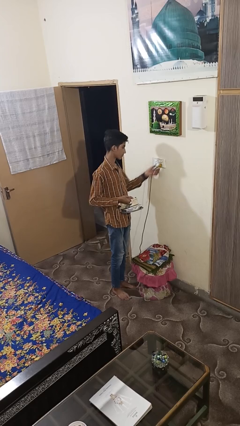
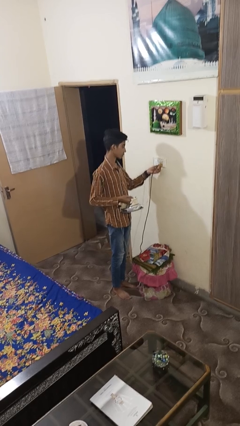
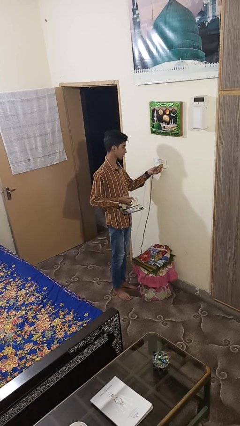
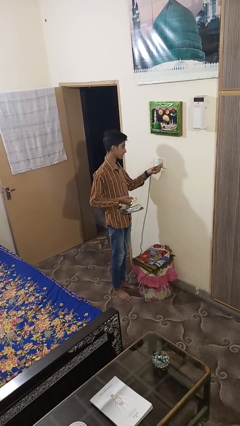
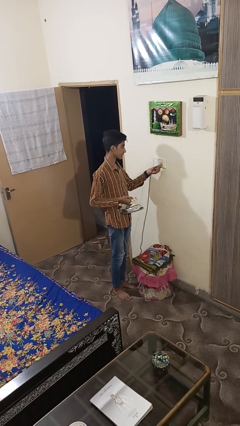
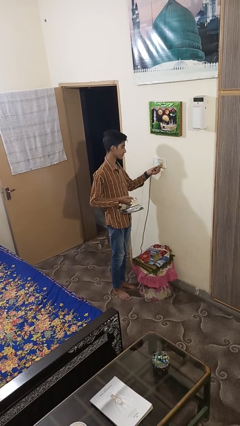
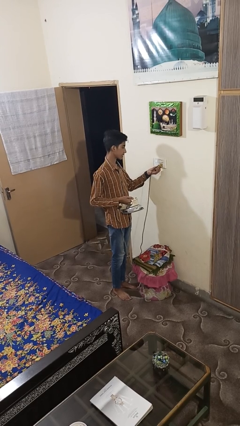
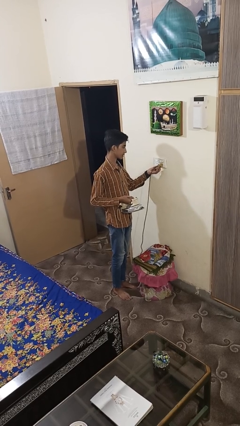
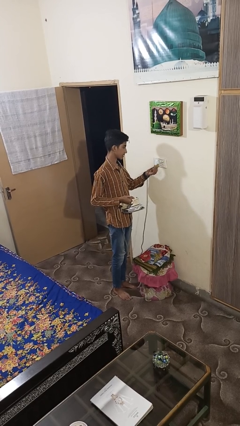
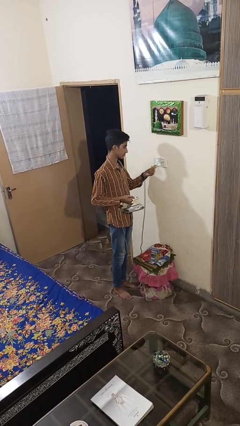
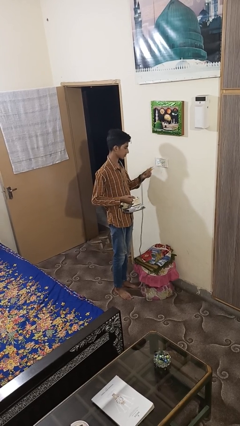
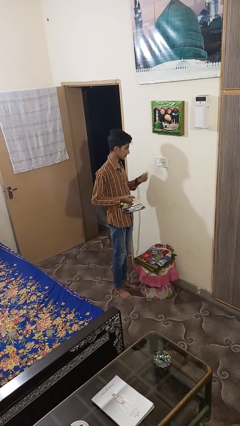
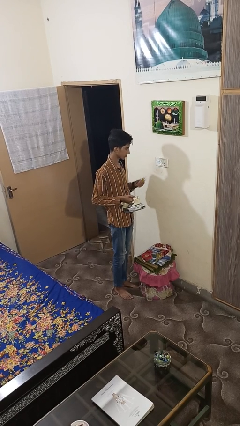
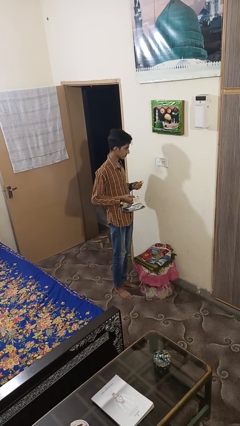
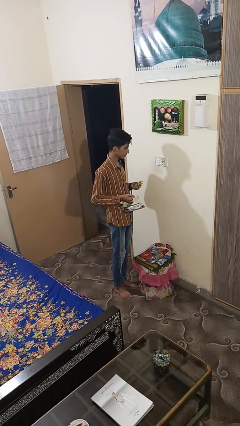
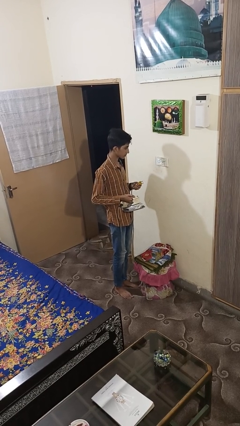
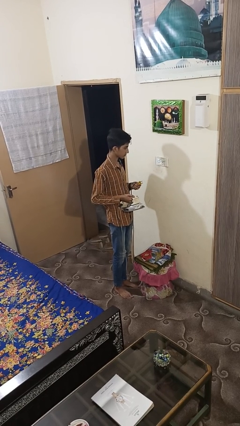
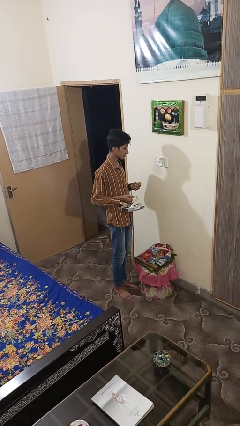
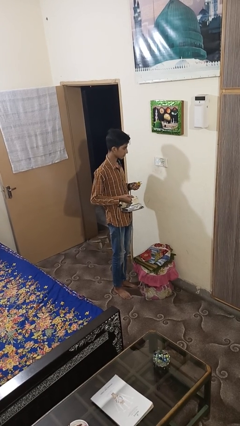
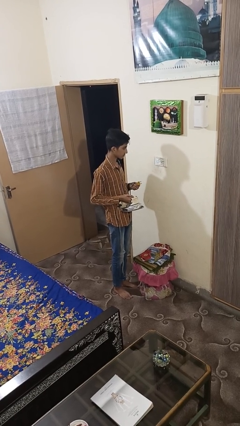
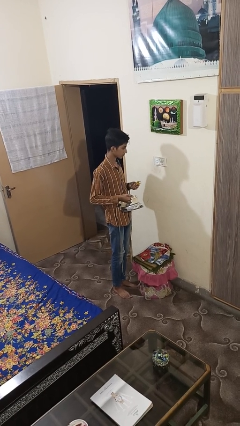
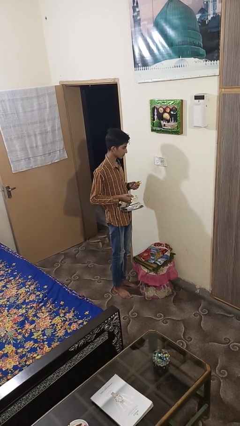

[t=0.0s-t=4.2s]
person unplugs from electrical socket

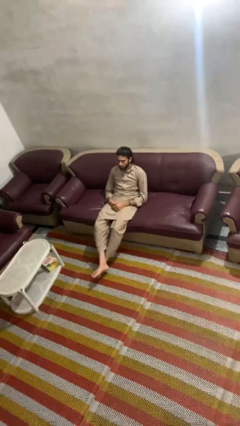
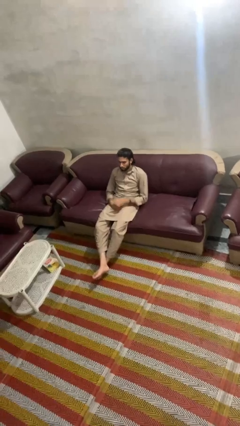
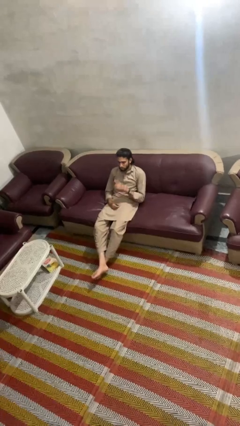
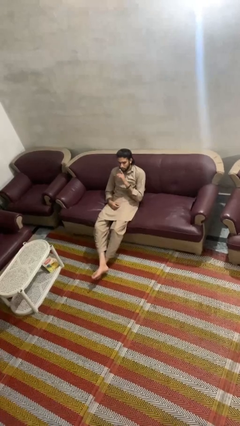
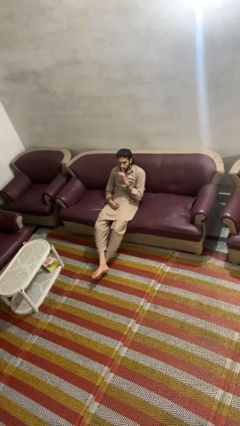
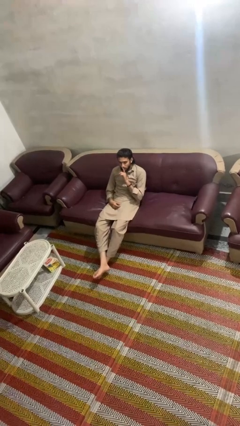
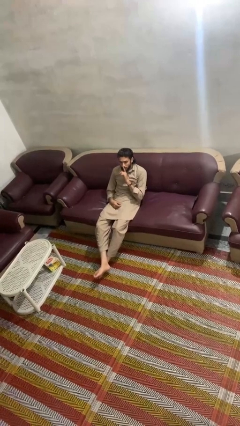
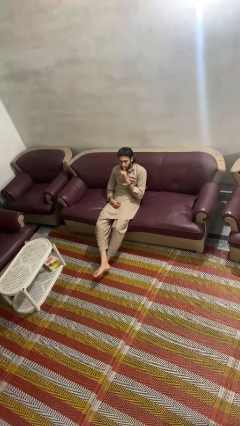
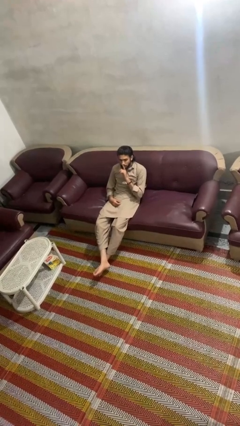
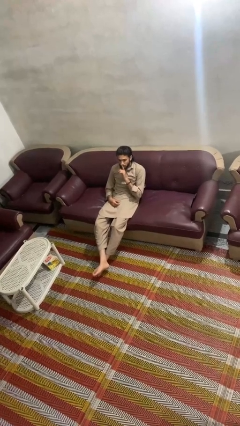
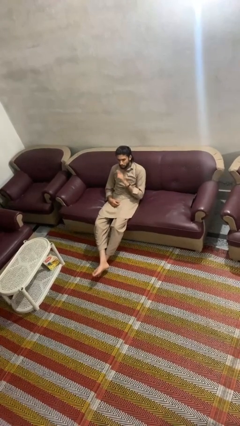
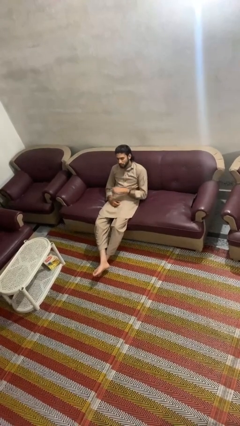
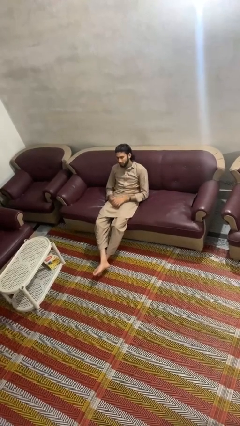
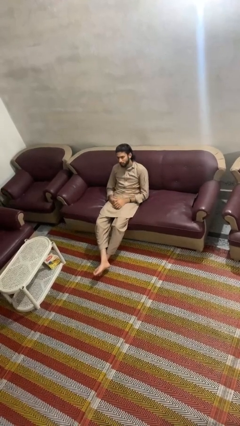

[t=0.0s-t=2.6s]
person gestures be quiet

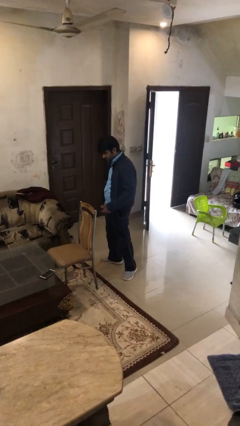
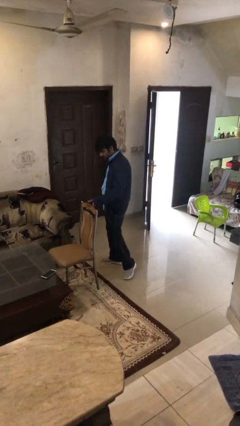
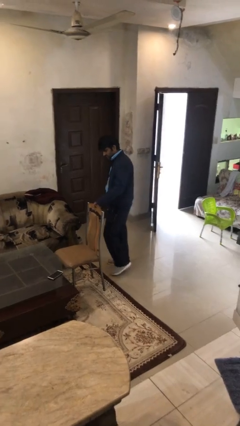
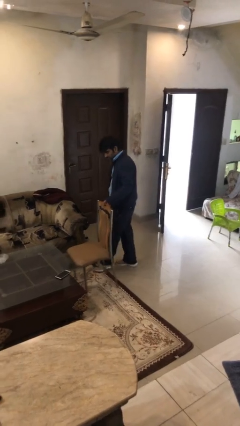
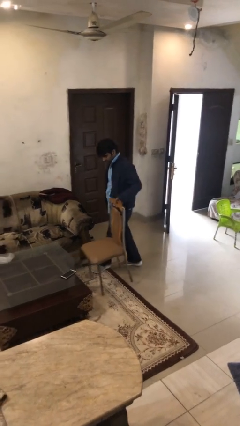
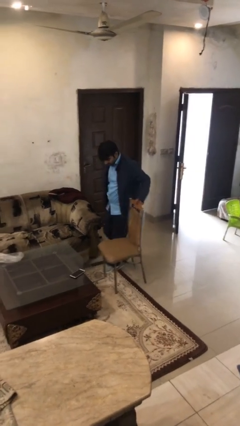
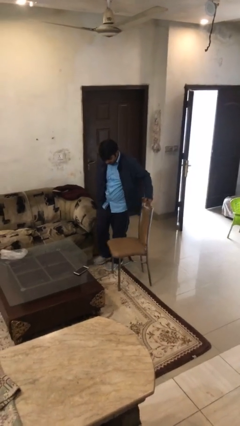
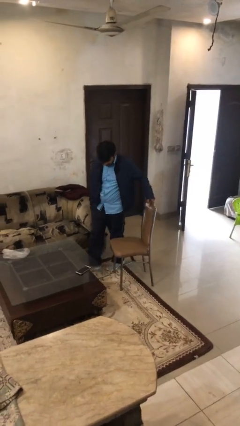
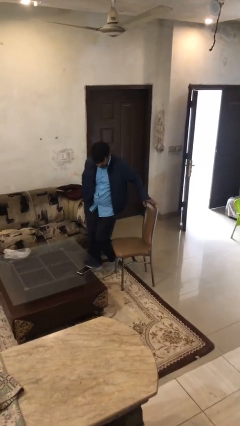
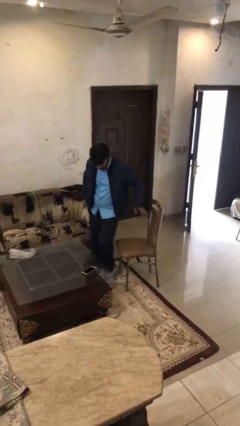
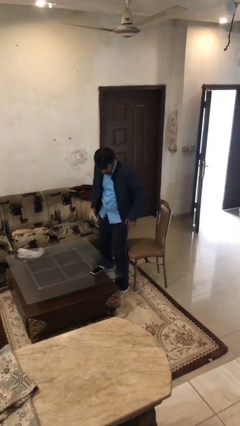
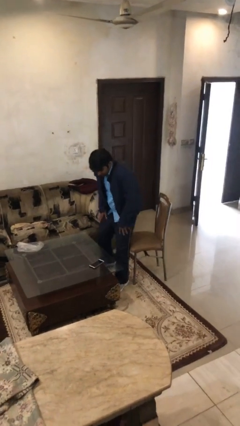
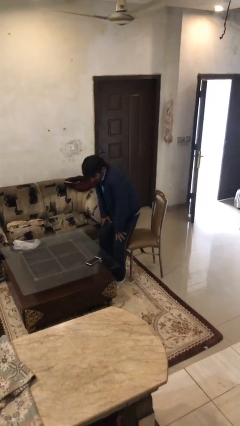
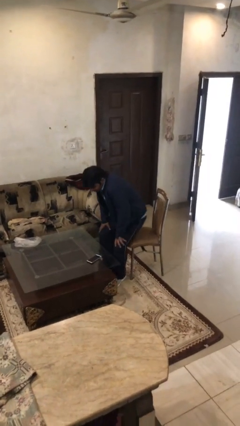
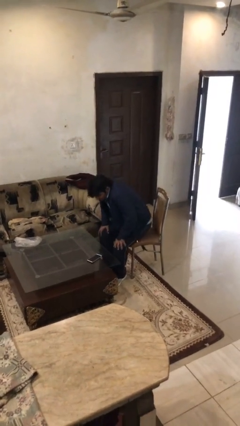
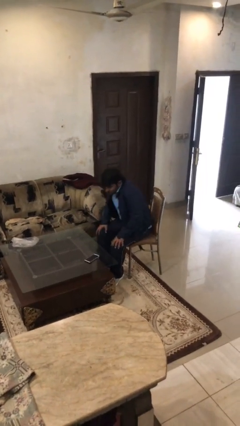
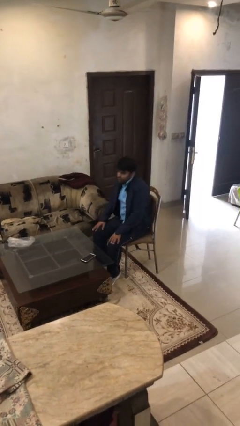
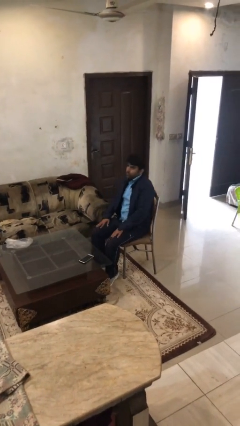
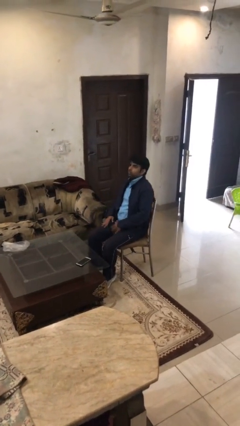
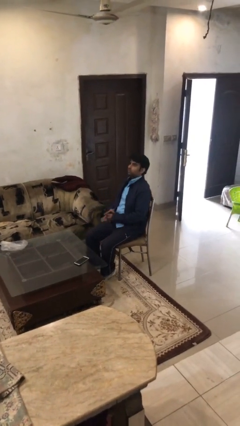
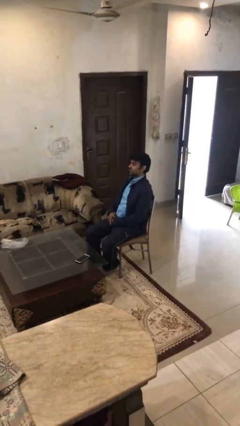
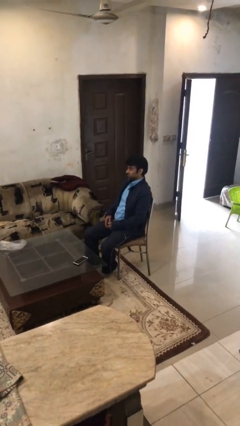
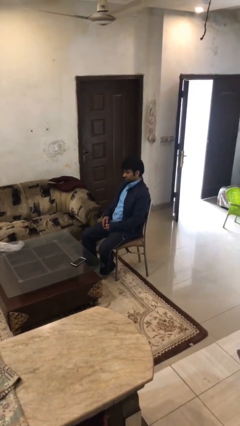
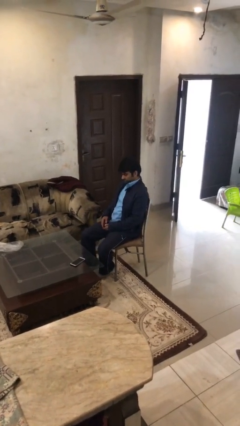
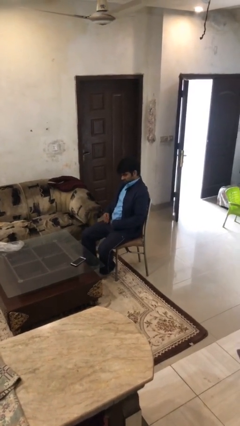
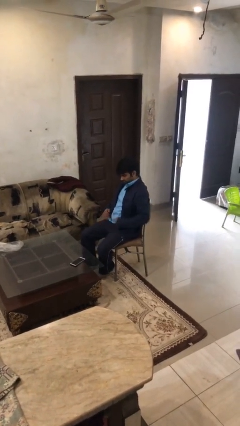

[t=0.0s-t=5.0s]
person sits down

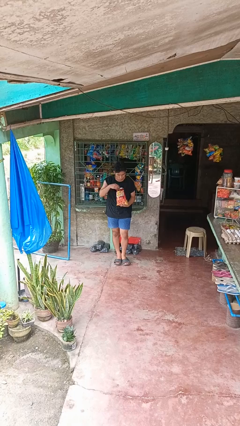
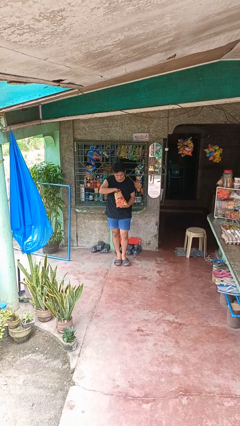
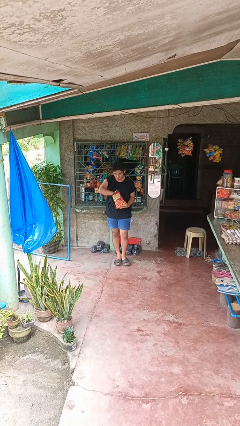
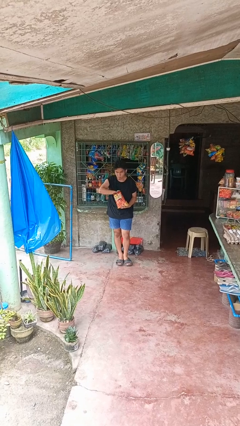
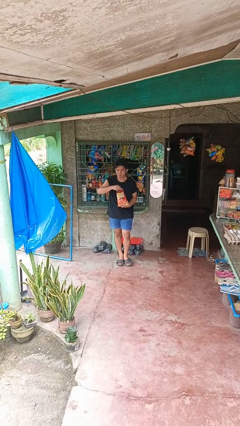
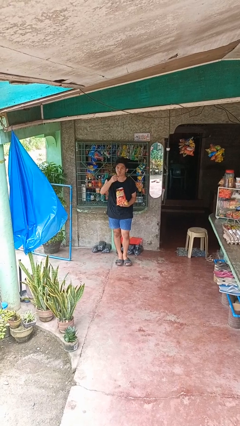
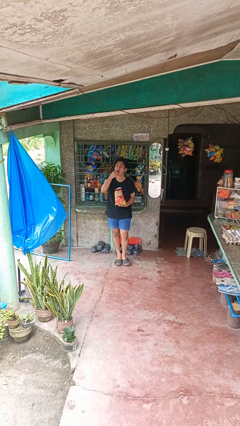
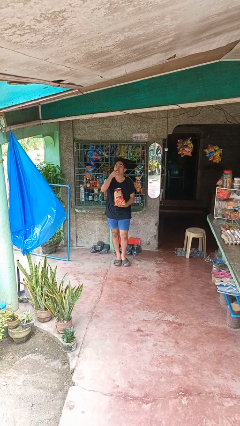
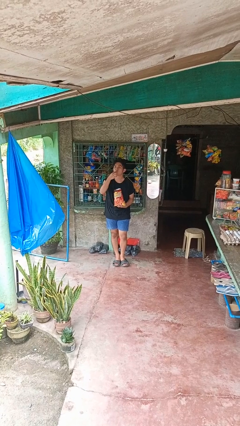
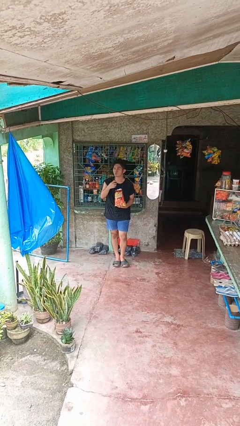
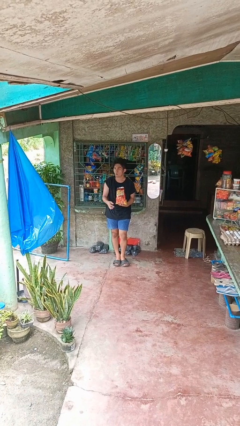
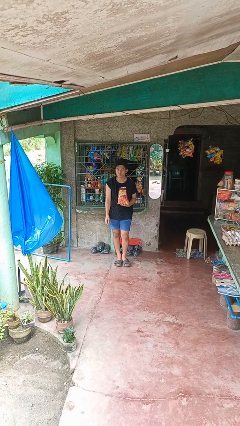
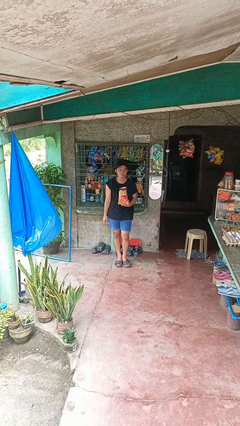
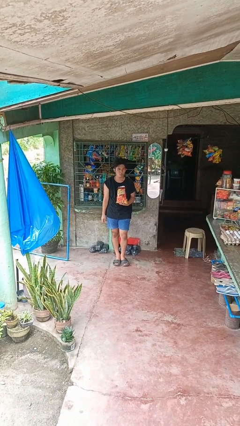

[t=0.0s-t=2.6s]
person eats snack from bag

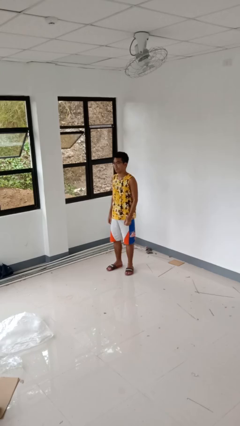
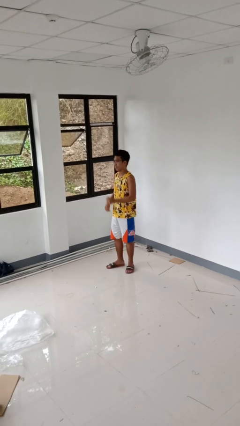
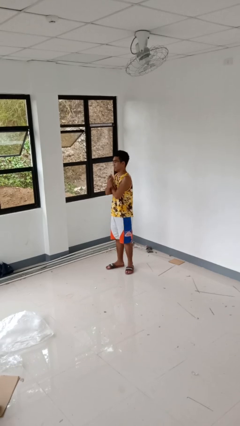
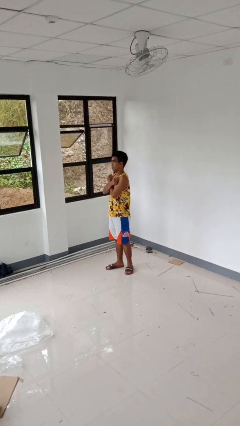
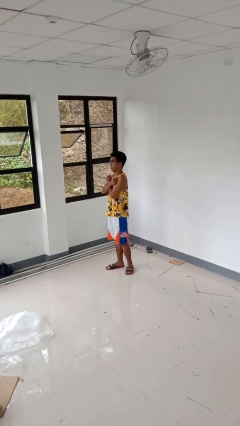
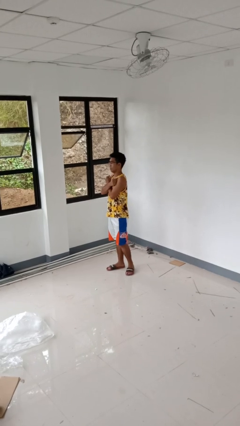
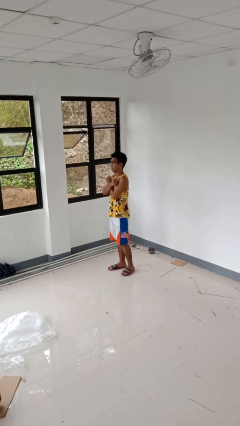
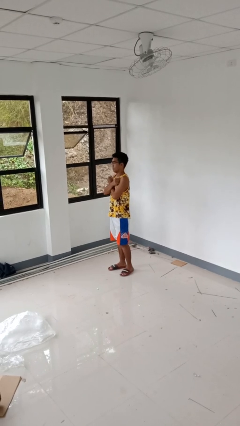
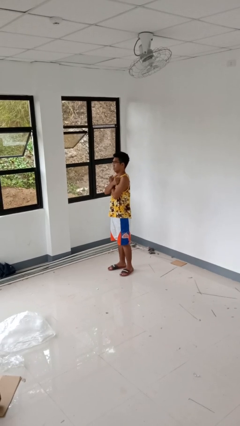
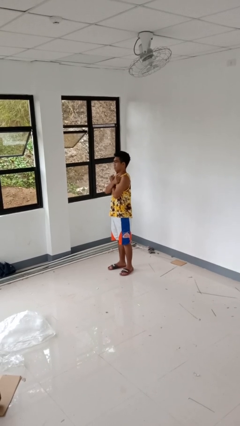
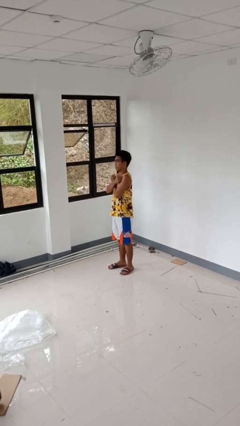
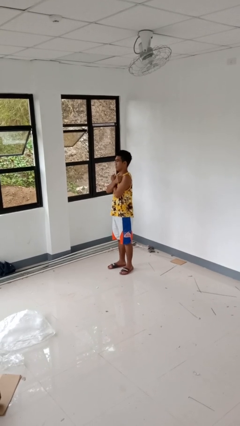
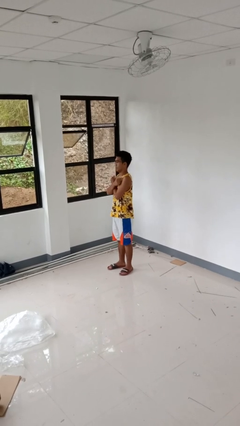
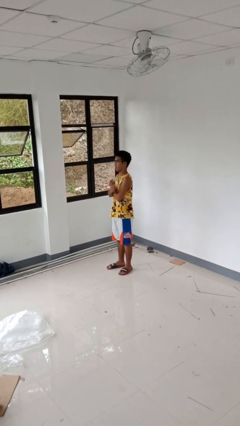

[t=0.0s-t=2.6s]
person gestures arms x

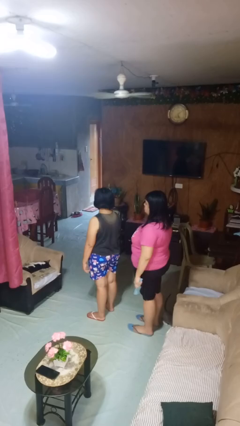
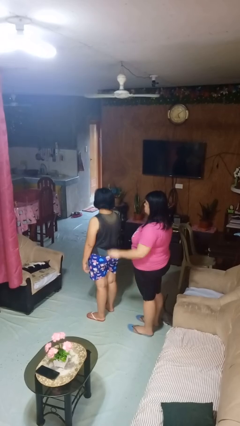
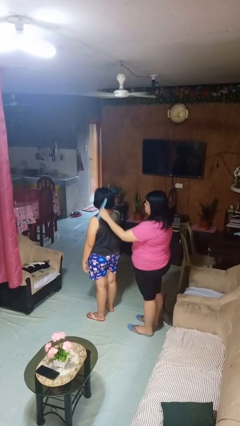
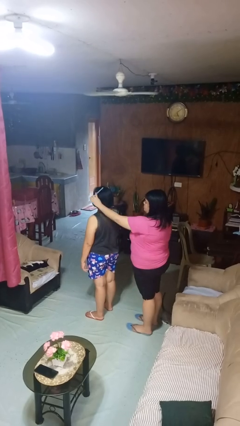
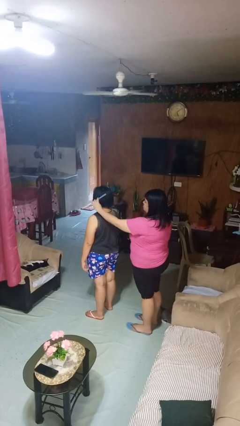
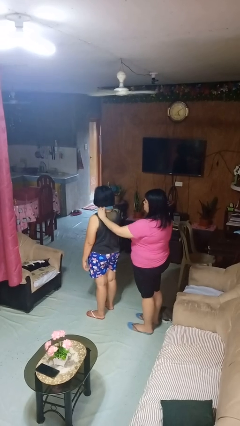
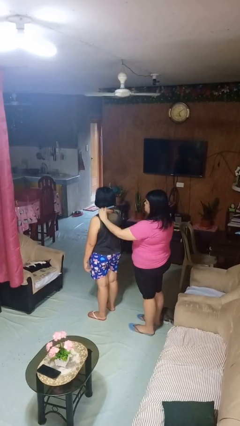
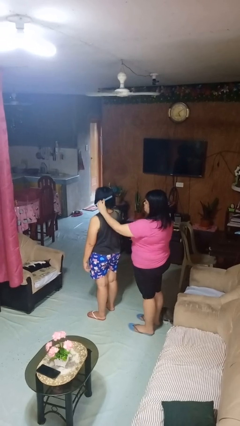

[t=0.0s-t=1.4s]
person brushes hair of person
